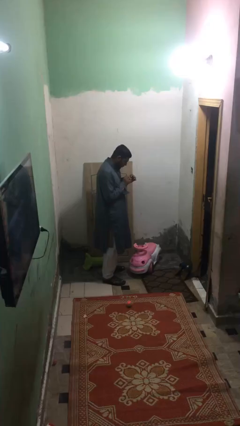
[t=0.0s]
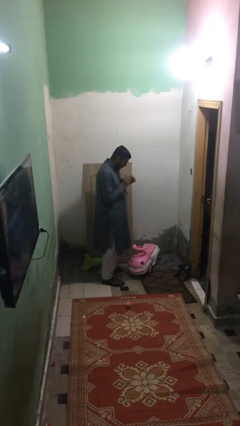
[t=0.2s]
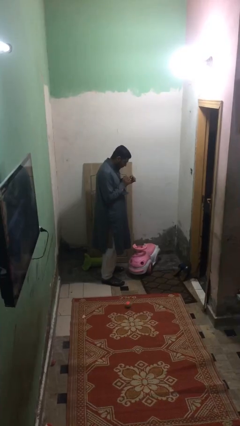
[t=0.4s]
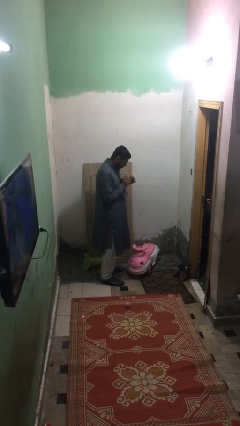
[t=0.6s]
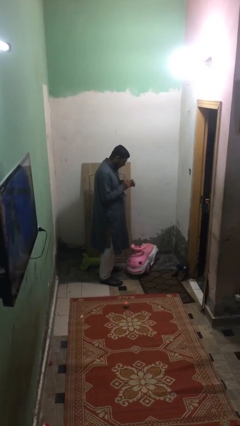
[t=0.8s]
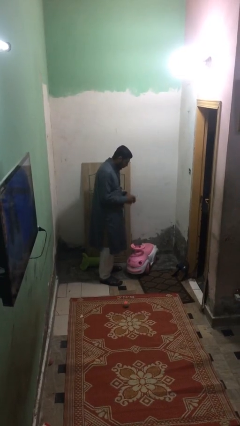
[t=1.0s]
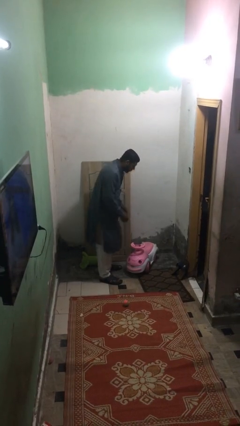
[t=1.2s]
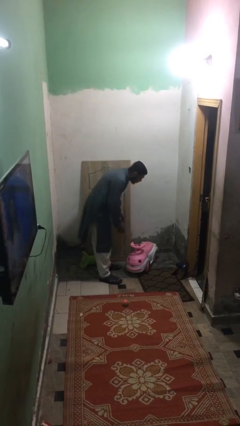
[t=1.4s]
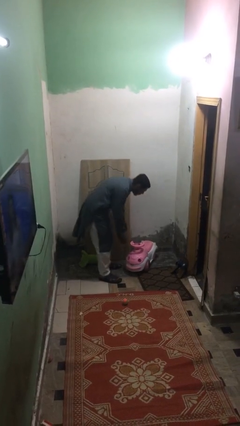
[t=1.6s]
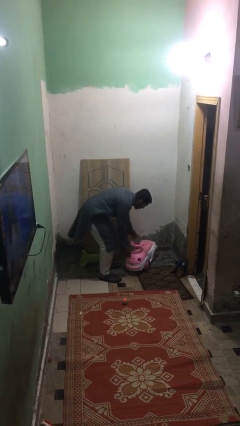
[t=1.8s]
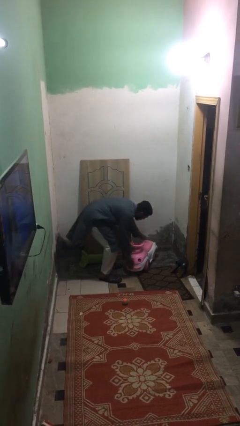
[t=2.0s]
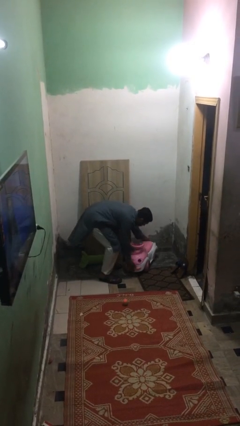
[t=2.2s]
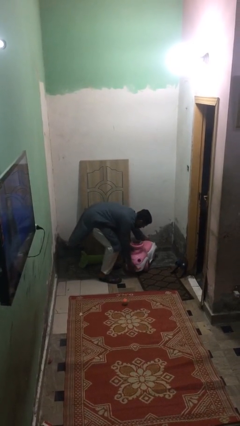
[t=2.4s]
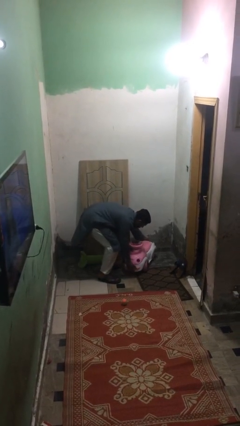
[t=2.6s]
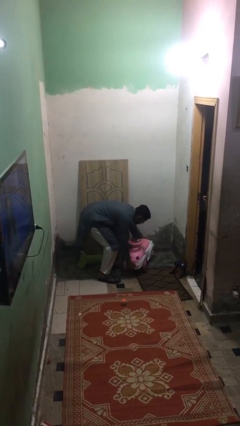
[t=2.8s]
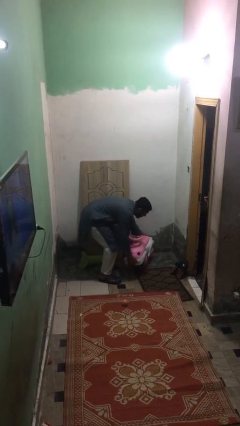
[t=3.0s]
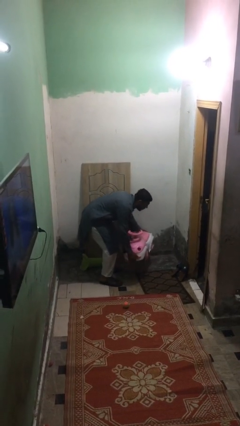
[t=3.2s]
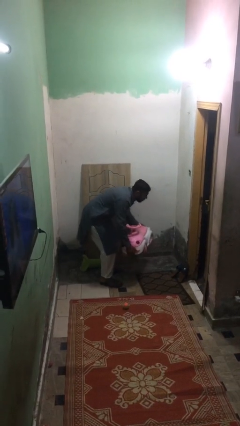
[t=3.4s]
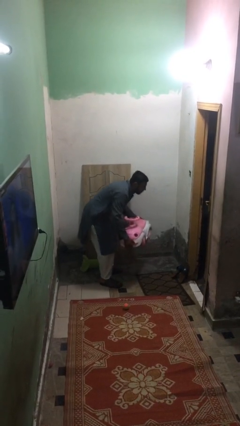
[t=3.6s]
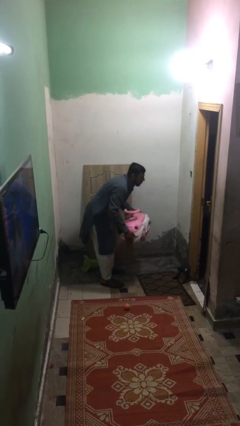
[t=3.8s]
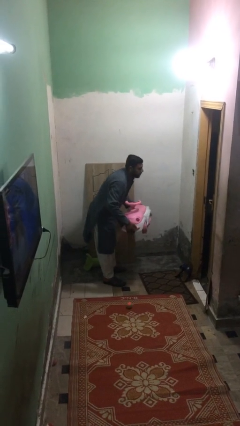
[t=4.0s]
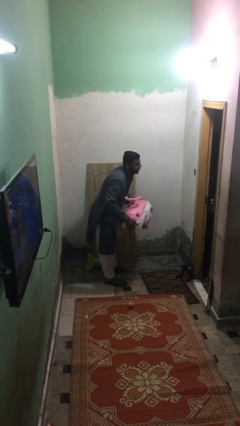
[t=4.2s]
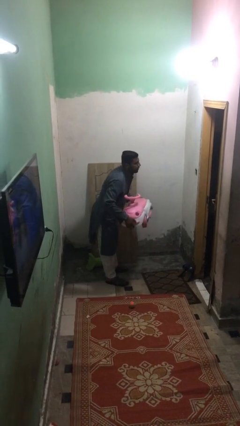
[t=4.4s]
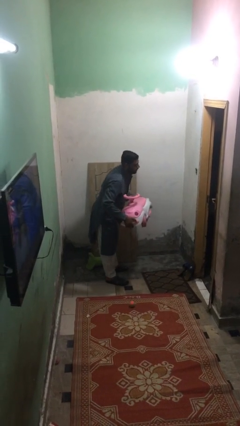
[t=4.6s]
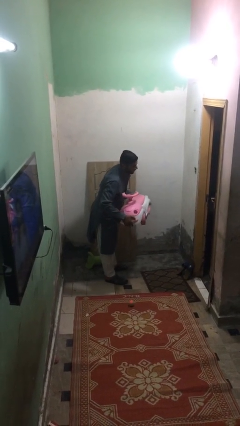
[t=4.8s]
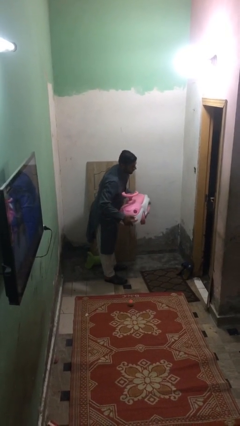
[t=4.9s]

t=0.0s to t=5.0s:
person picks up object from floor

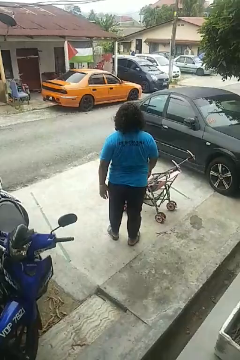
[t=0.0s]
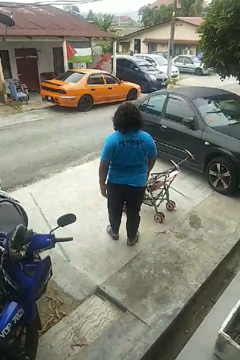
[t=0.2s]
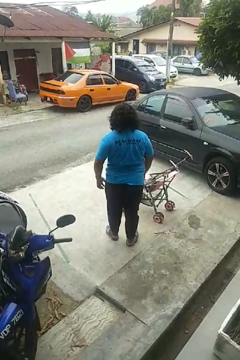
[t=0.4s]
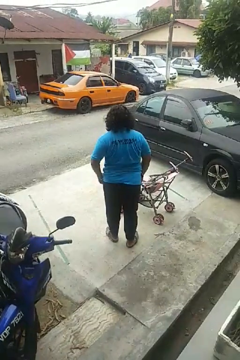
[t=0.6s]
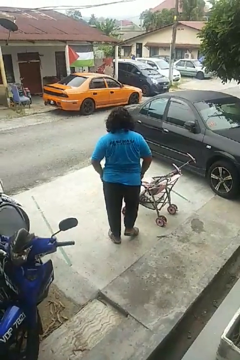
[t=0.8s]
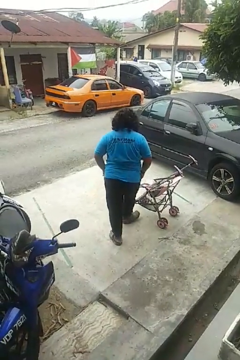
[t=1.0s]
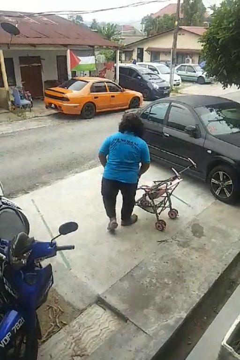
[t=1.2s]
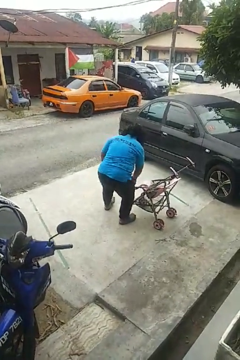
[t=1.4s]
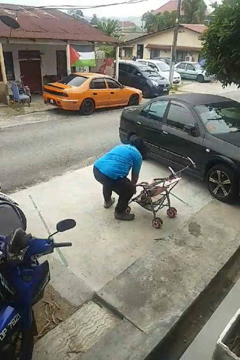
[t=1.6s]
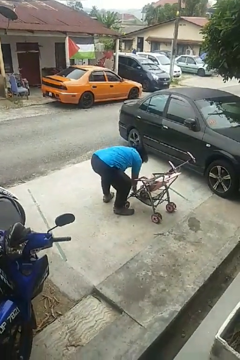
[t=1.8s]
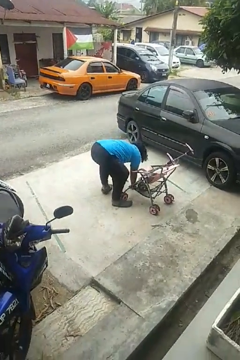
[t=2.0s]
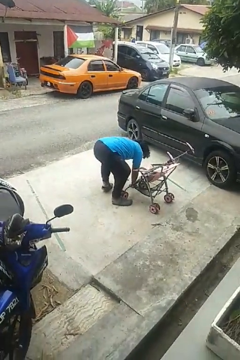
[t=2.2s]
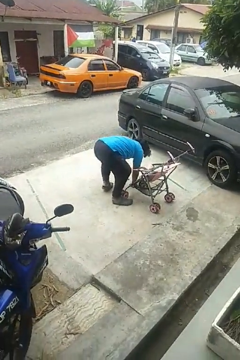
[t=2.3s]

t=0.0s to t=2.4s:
person trips on object on floor

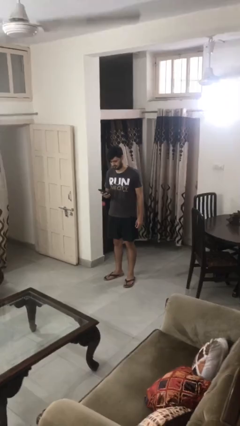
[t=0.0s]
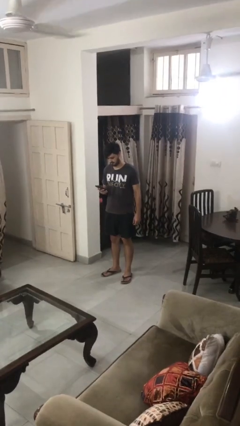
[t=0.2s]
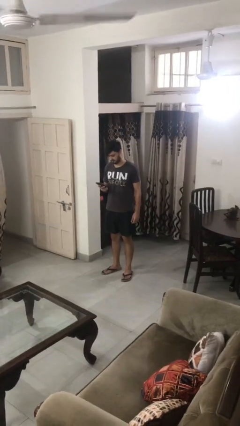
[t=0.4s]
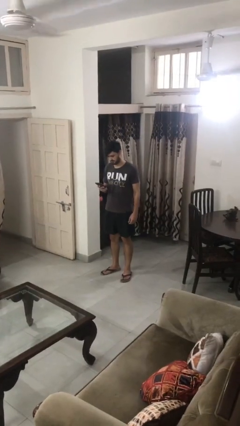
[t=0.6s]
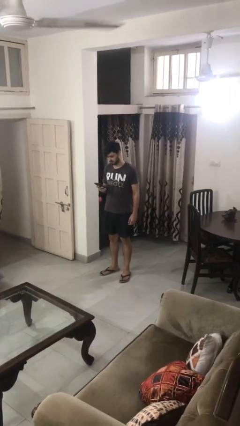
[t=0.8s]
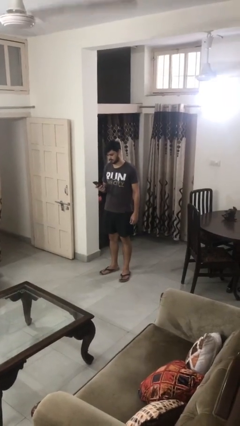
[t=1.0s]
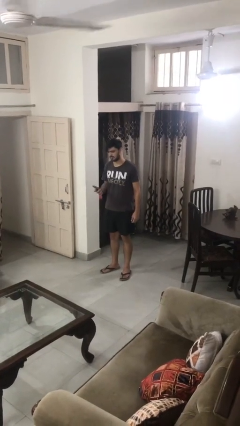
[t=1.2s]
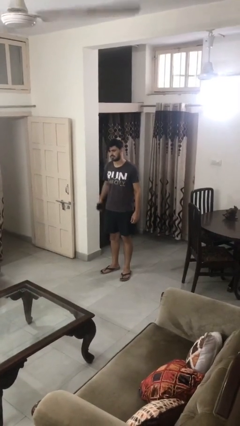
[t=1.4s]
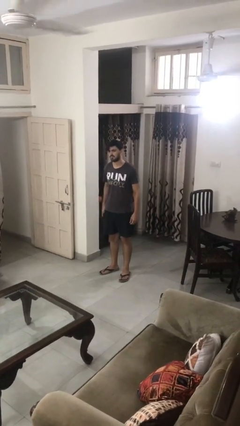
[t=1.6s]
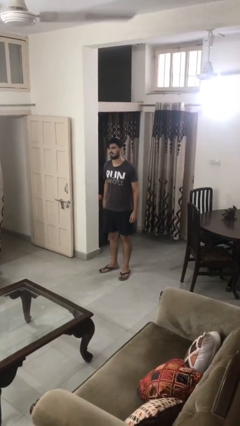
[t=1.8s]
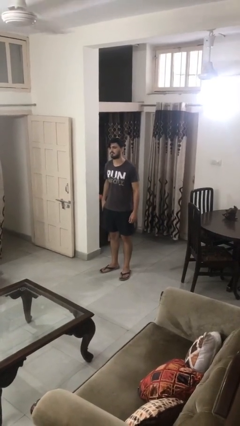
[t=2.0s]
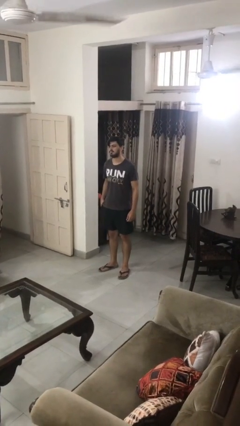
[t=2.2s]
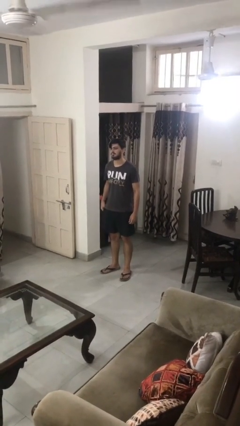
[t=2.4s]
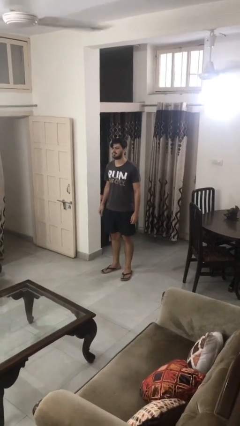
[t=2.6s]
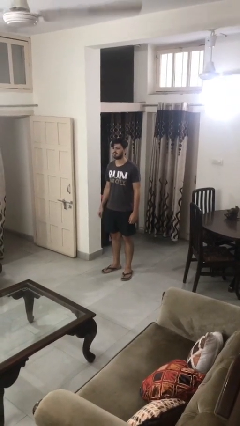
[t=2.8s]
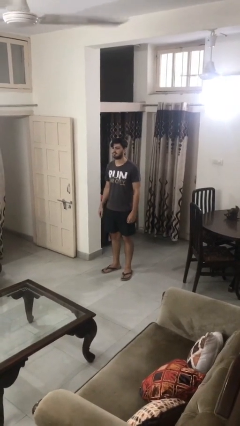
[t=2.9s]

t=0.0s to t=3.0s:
person puts phone into pocket

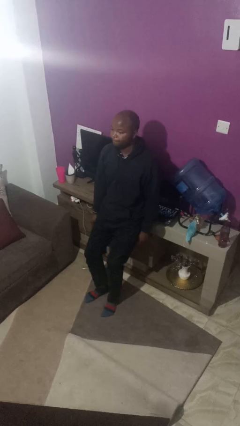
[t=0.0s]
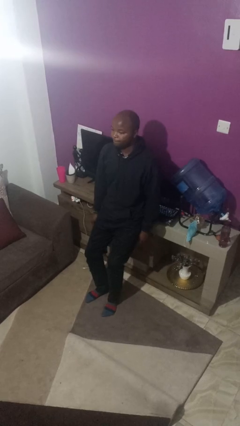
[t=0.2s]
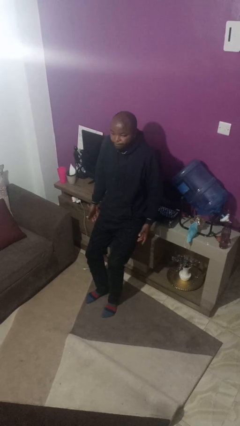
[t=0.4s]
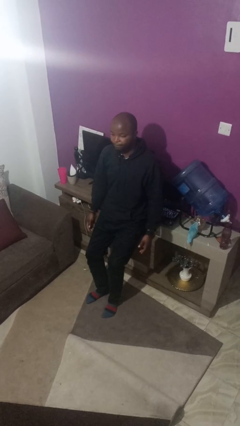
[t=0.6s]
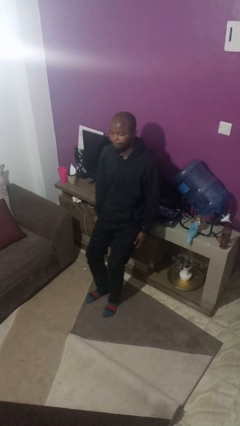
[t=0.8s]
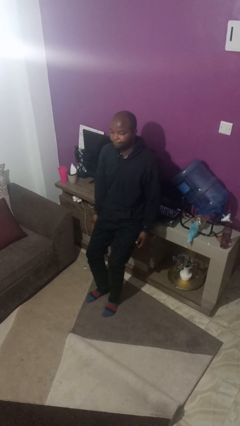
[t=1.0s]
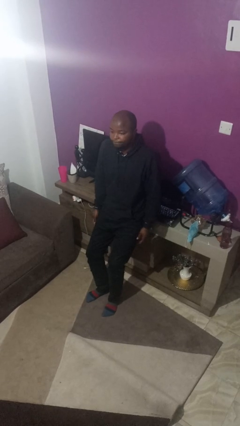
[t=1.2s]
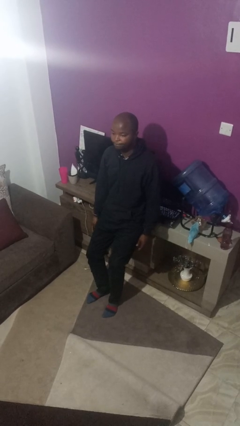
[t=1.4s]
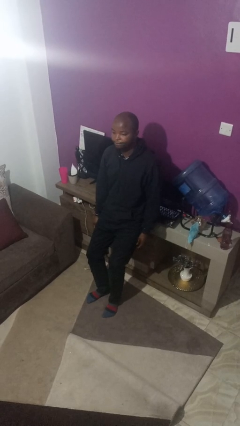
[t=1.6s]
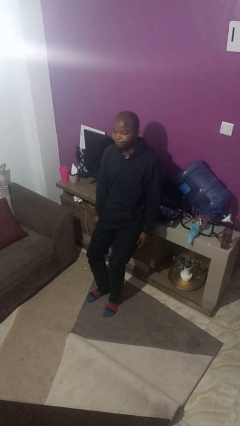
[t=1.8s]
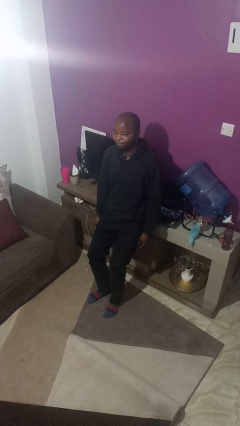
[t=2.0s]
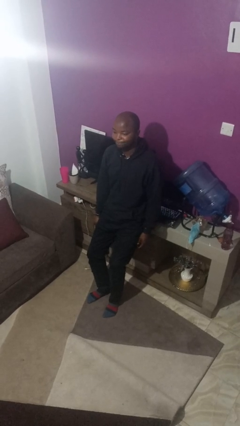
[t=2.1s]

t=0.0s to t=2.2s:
person shrugs

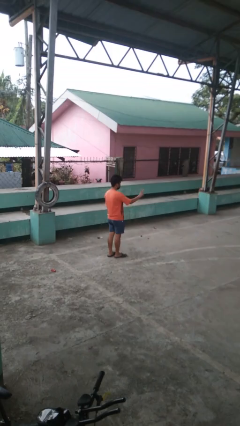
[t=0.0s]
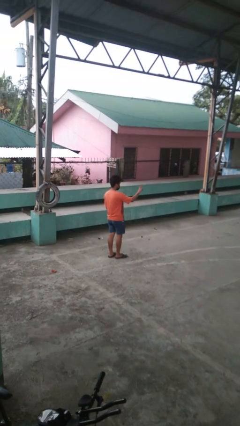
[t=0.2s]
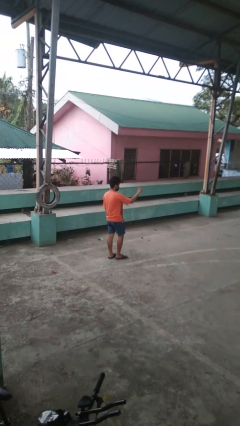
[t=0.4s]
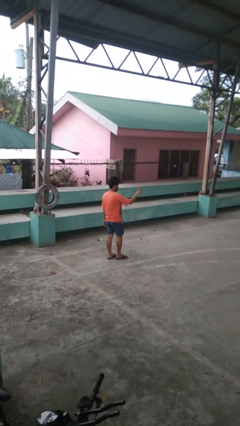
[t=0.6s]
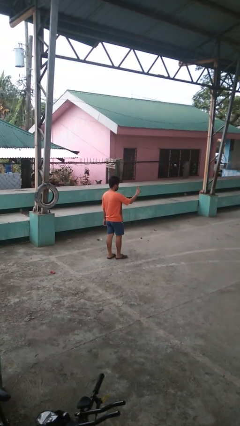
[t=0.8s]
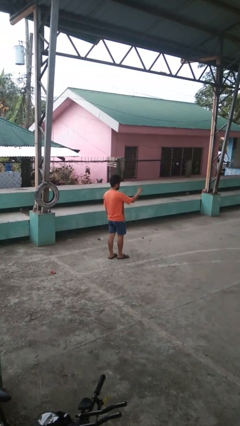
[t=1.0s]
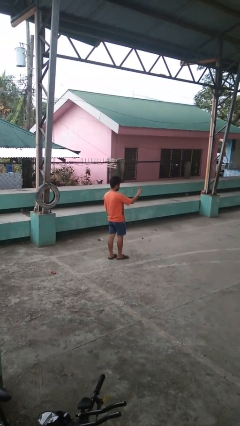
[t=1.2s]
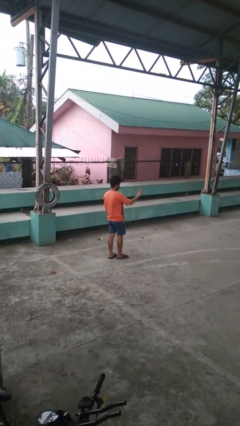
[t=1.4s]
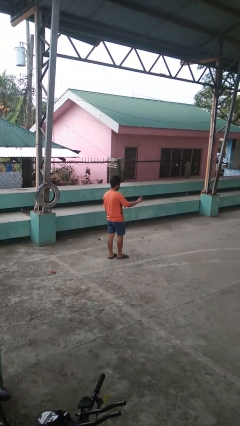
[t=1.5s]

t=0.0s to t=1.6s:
person gestures peace

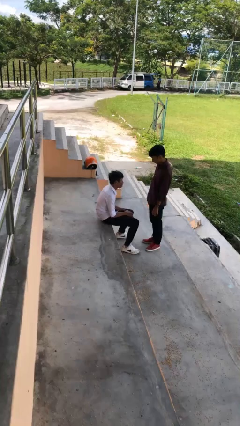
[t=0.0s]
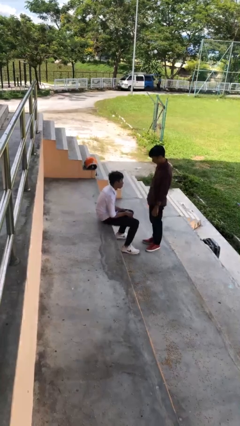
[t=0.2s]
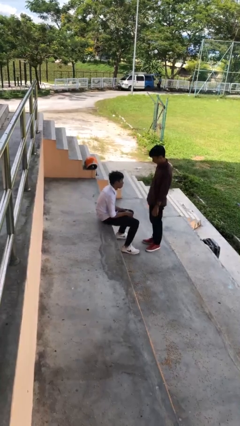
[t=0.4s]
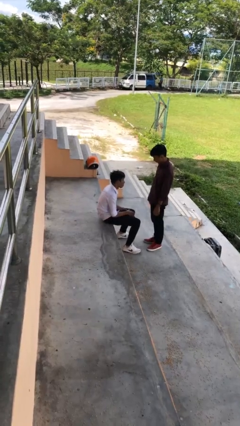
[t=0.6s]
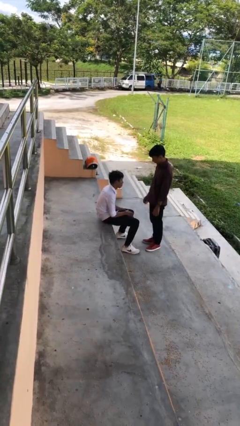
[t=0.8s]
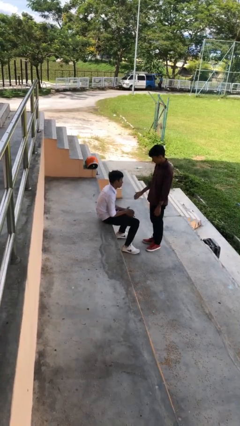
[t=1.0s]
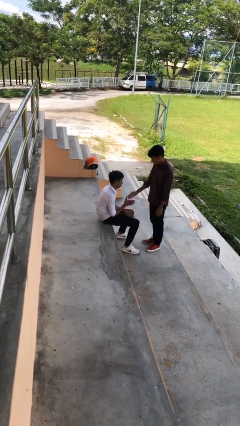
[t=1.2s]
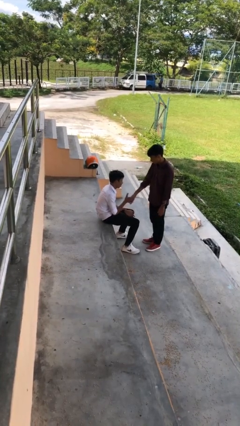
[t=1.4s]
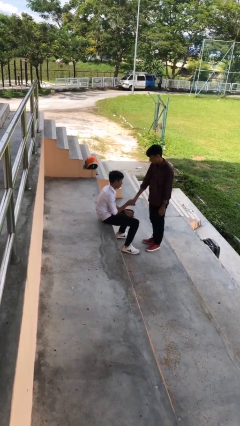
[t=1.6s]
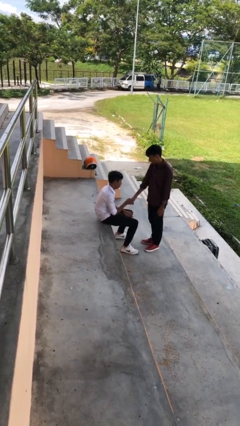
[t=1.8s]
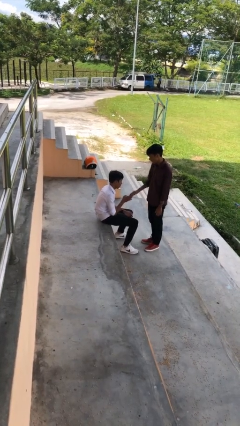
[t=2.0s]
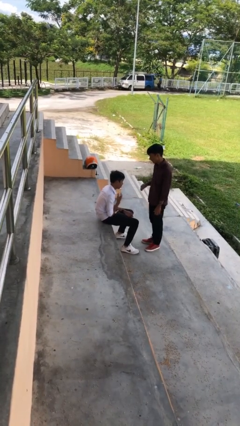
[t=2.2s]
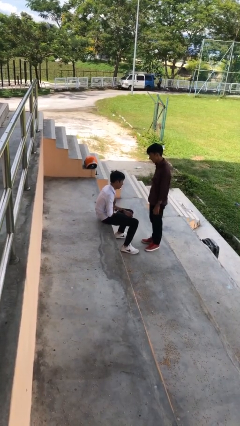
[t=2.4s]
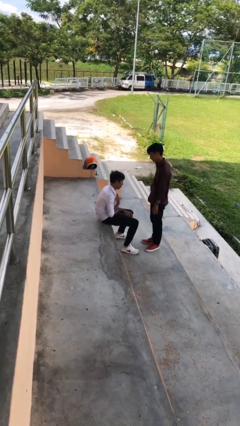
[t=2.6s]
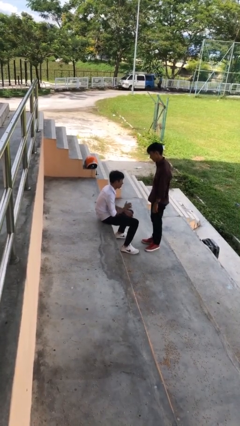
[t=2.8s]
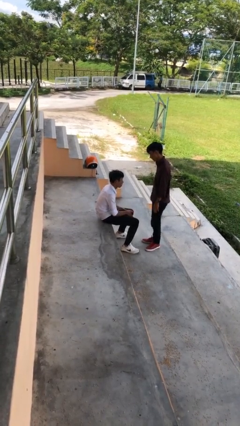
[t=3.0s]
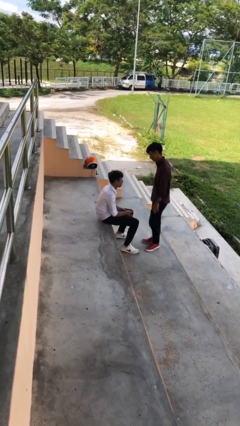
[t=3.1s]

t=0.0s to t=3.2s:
person shakes hand
